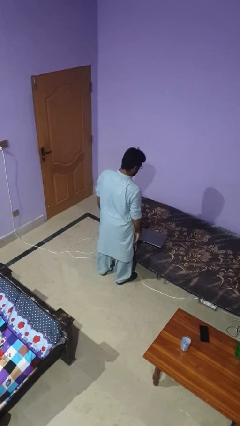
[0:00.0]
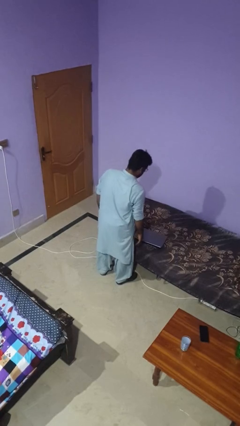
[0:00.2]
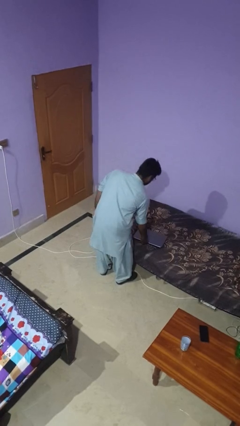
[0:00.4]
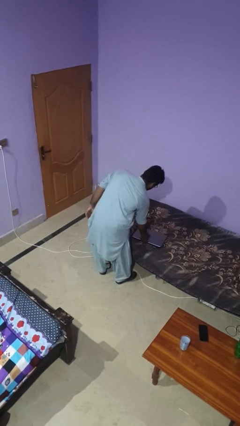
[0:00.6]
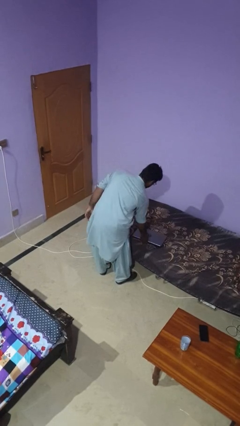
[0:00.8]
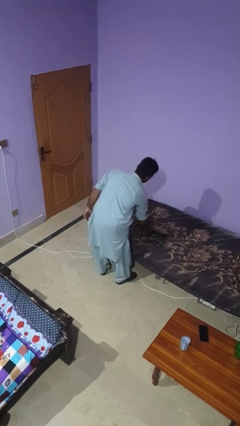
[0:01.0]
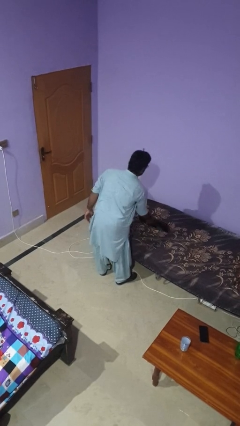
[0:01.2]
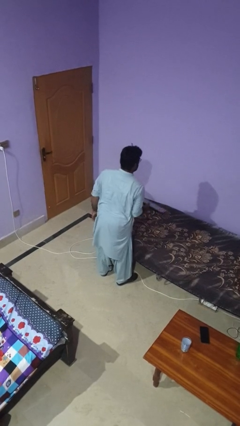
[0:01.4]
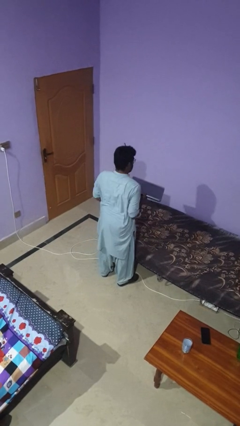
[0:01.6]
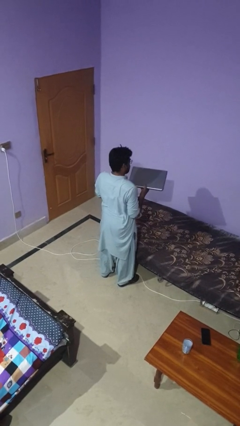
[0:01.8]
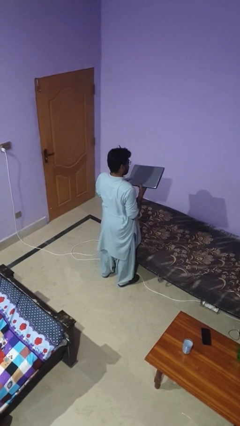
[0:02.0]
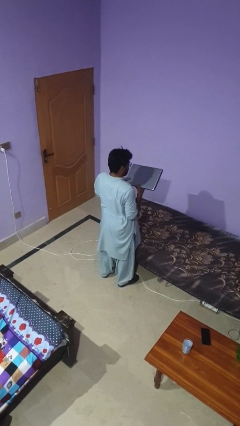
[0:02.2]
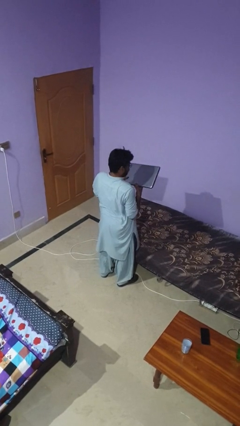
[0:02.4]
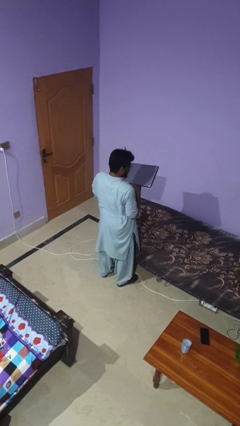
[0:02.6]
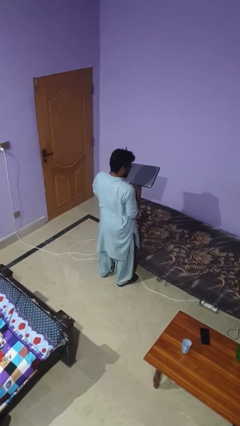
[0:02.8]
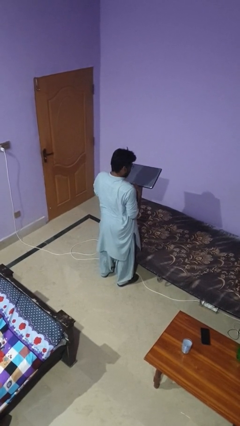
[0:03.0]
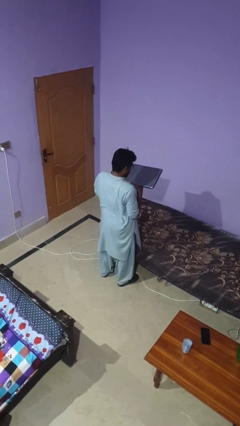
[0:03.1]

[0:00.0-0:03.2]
person picks up object from bed

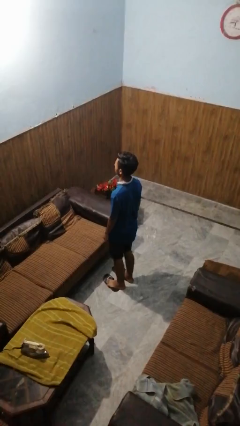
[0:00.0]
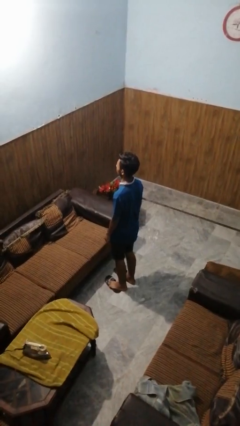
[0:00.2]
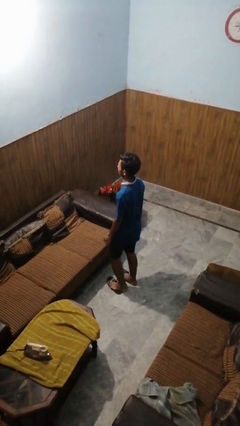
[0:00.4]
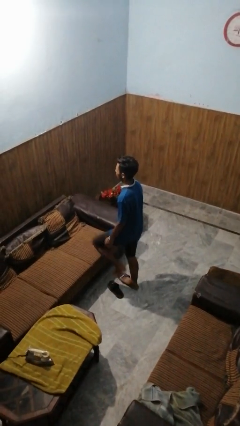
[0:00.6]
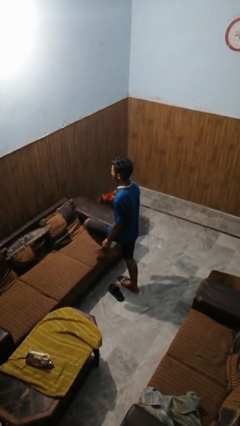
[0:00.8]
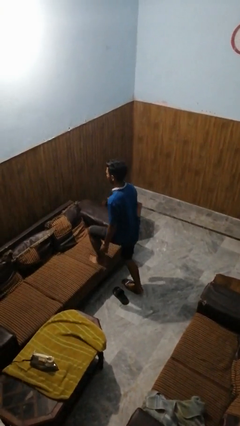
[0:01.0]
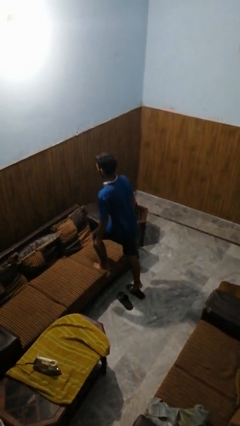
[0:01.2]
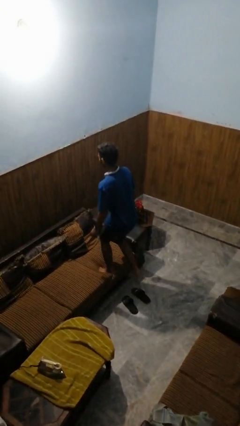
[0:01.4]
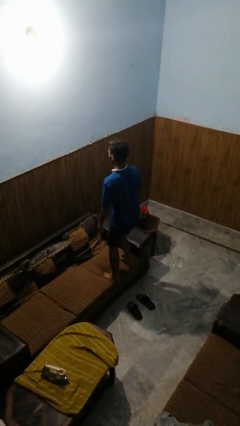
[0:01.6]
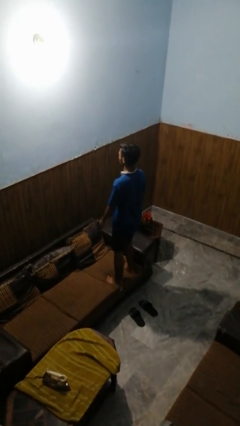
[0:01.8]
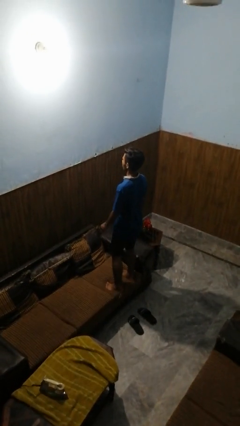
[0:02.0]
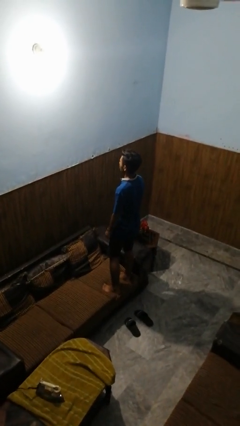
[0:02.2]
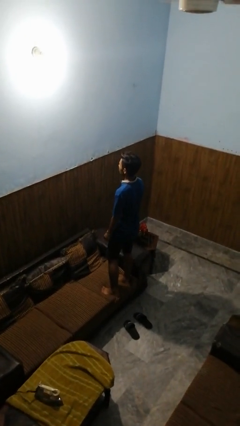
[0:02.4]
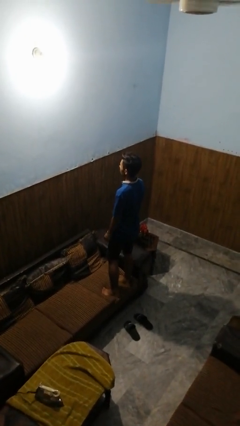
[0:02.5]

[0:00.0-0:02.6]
person climbs on couch

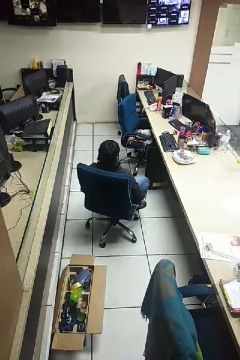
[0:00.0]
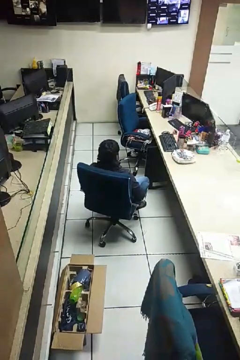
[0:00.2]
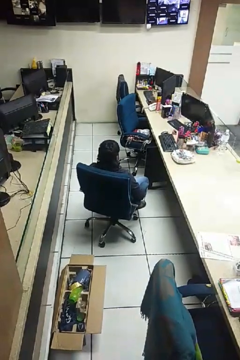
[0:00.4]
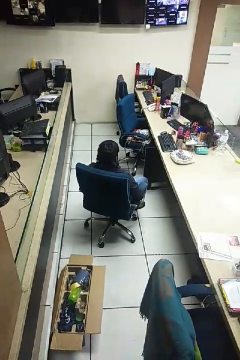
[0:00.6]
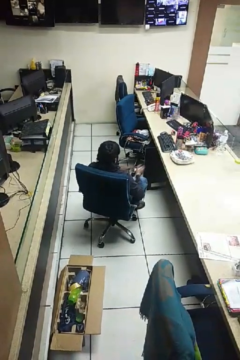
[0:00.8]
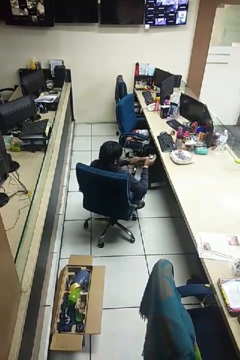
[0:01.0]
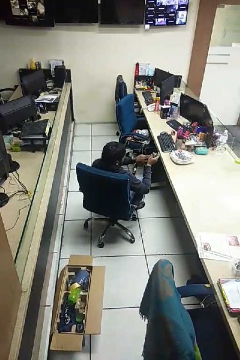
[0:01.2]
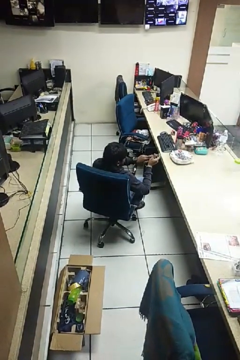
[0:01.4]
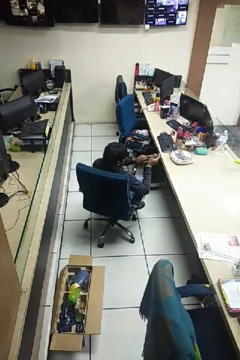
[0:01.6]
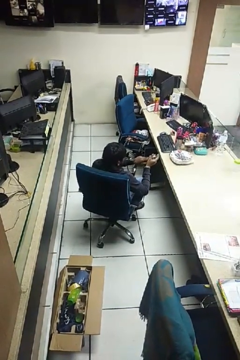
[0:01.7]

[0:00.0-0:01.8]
person clips fingernails

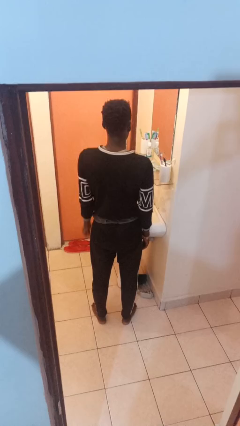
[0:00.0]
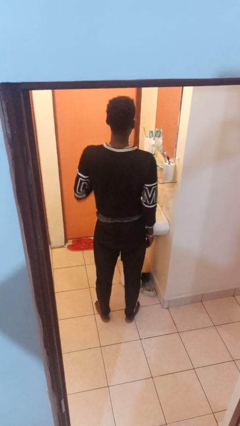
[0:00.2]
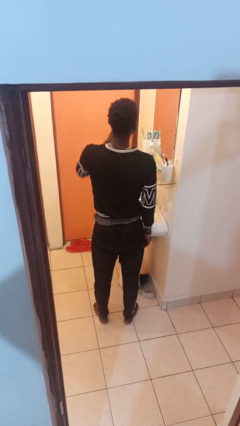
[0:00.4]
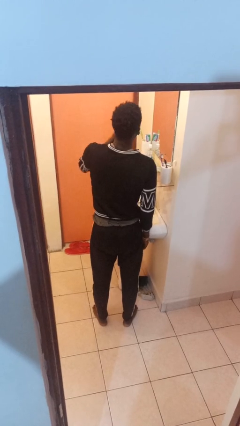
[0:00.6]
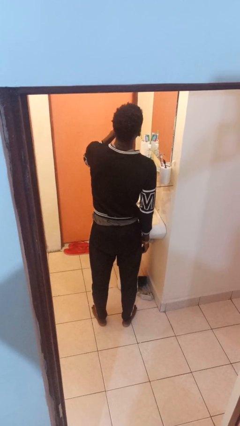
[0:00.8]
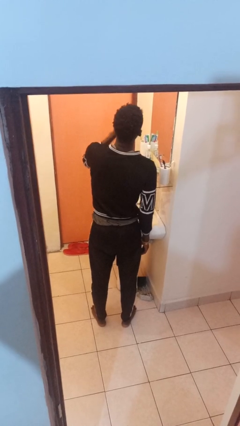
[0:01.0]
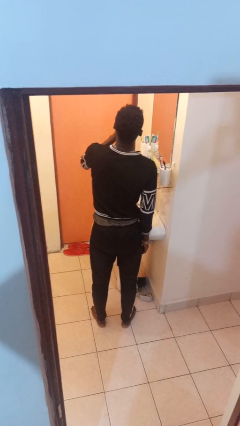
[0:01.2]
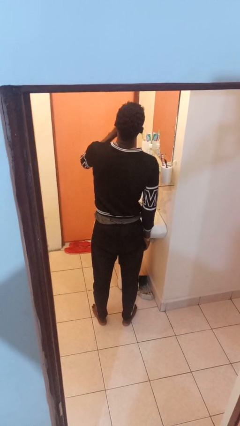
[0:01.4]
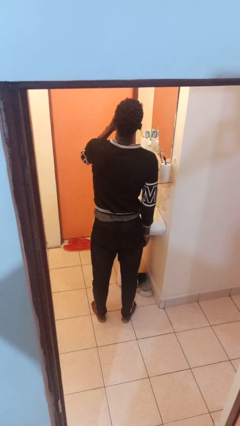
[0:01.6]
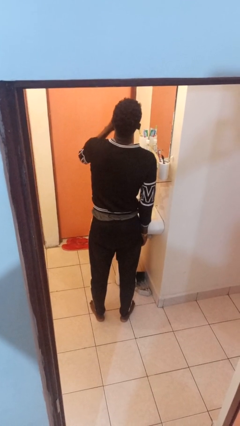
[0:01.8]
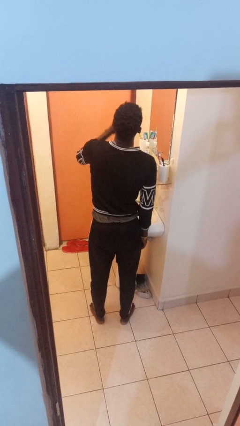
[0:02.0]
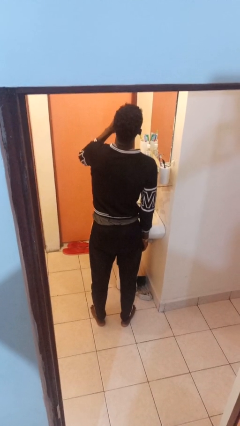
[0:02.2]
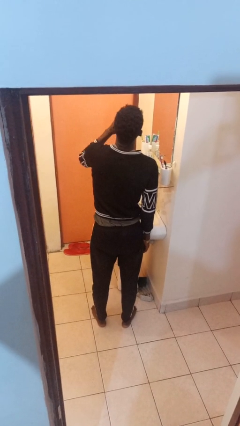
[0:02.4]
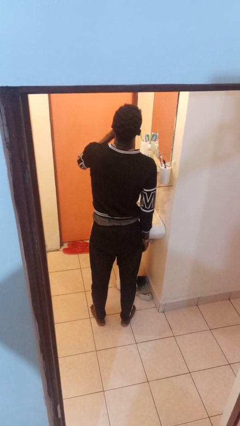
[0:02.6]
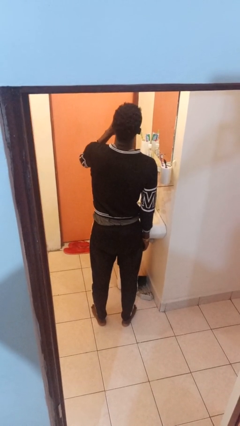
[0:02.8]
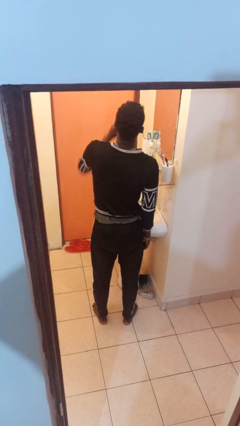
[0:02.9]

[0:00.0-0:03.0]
person brushes teeth

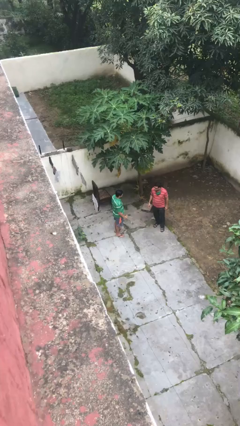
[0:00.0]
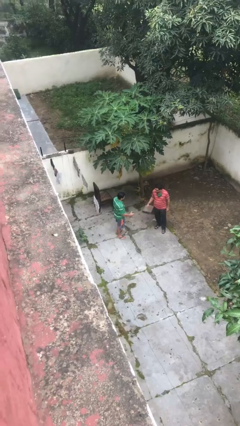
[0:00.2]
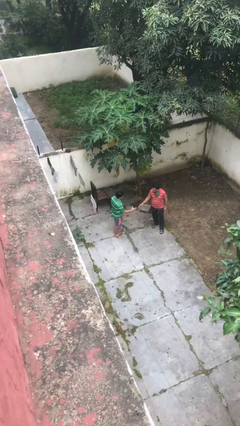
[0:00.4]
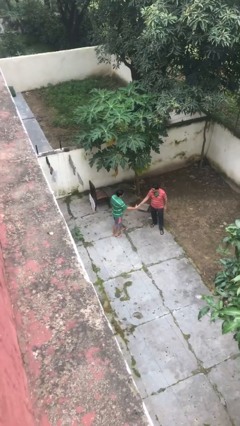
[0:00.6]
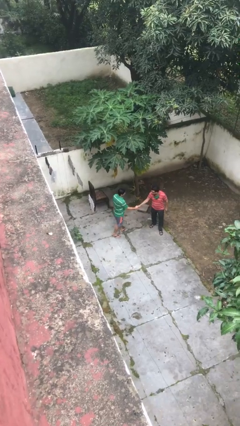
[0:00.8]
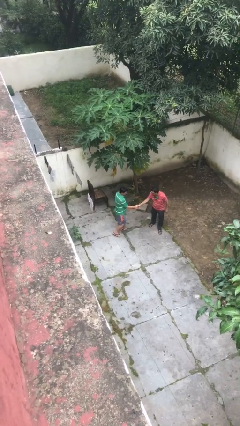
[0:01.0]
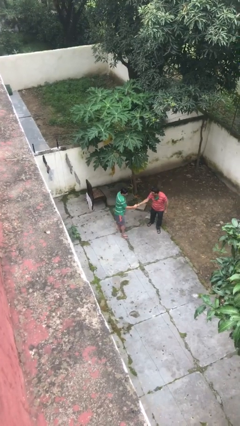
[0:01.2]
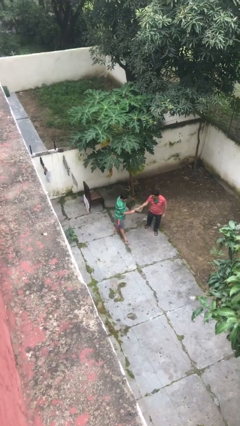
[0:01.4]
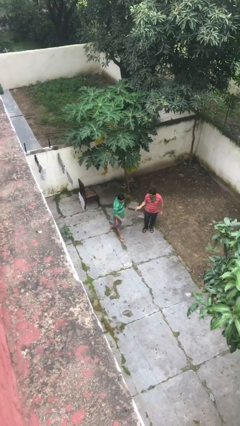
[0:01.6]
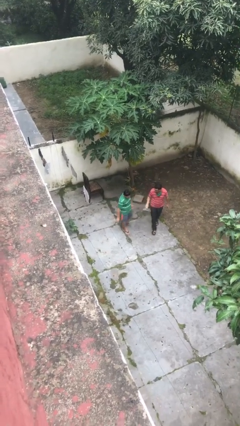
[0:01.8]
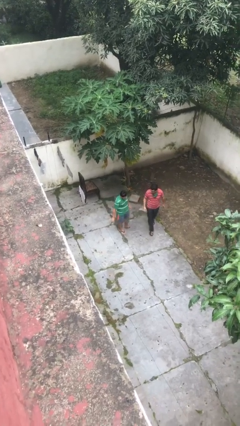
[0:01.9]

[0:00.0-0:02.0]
person shakes hand

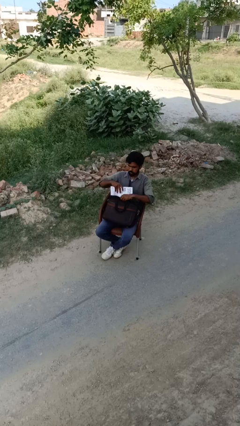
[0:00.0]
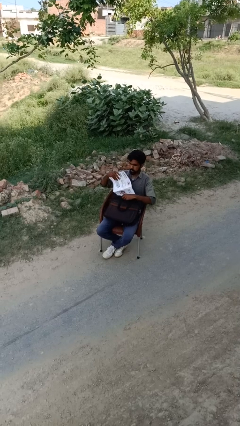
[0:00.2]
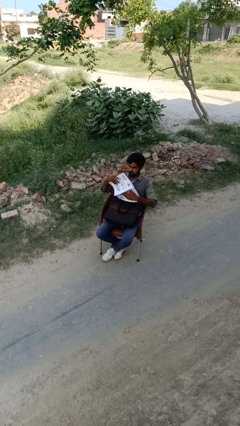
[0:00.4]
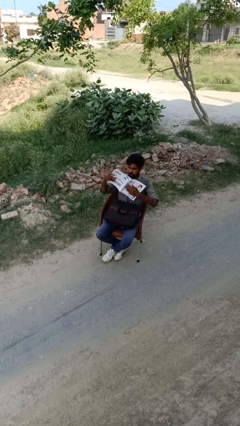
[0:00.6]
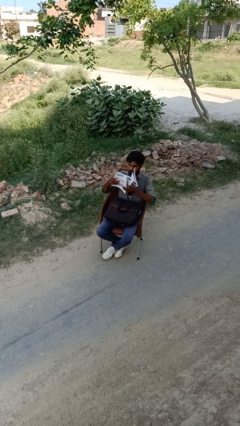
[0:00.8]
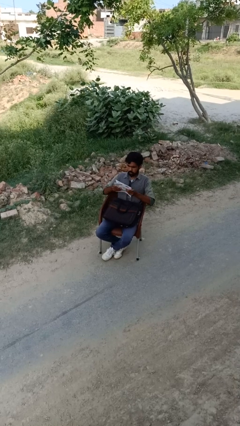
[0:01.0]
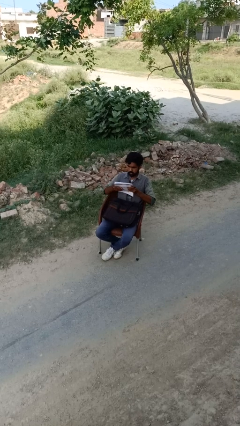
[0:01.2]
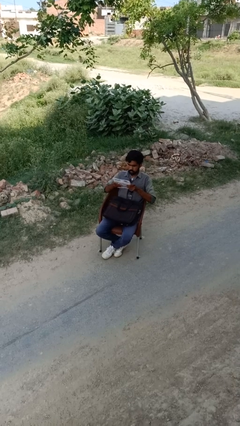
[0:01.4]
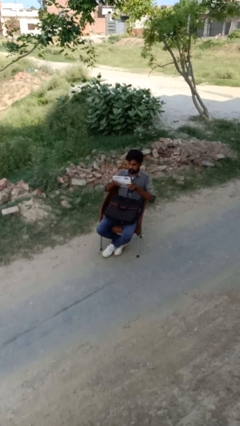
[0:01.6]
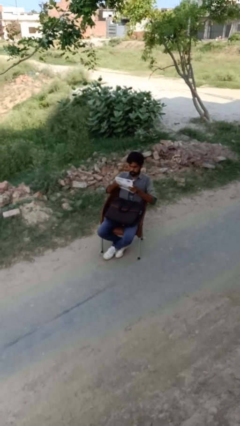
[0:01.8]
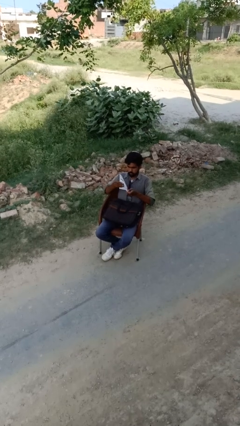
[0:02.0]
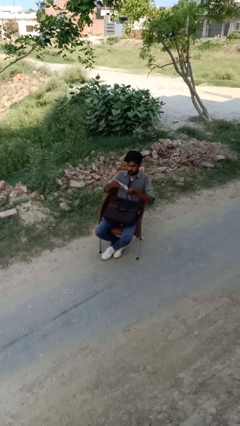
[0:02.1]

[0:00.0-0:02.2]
person takes object from backpack

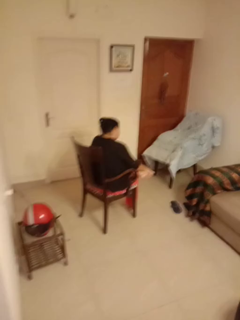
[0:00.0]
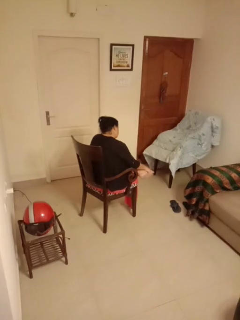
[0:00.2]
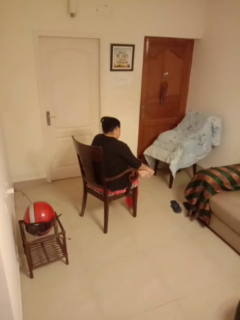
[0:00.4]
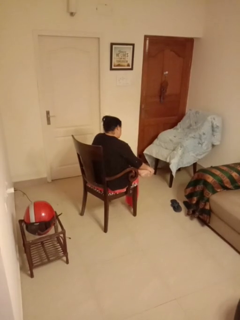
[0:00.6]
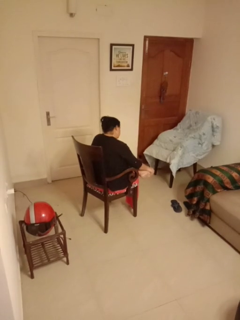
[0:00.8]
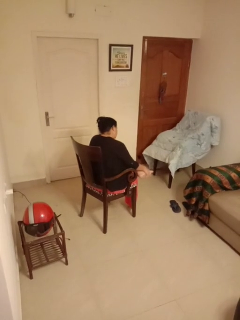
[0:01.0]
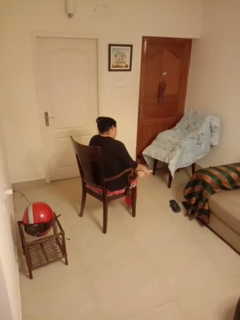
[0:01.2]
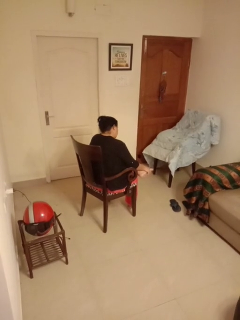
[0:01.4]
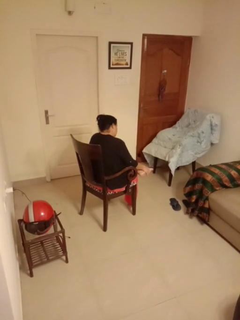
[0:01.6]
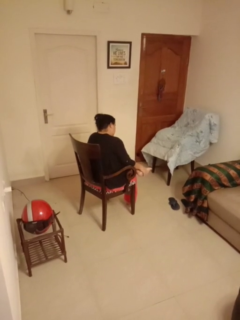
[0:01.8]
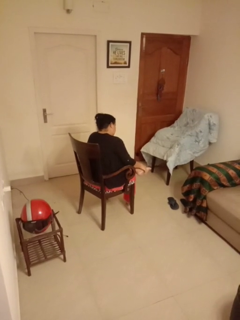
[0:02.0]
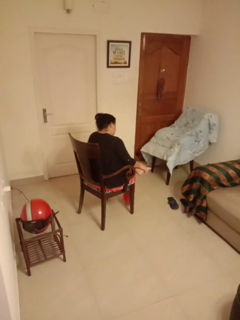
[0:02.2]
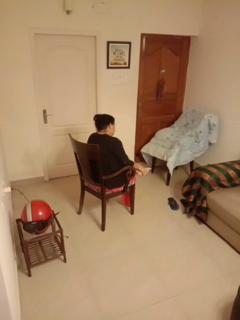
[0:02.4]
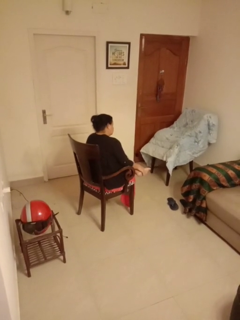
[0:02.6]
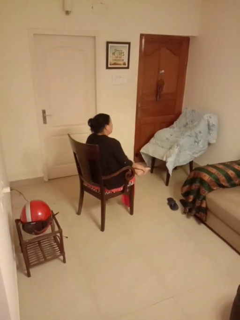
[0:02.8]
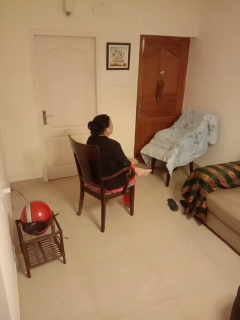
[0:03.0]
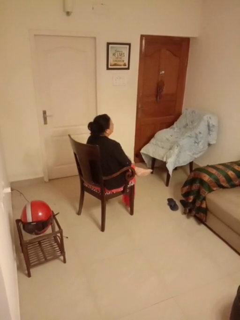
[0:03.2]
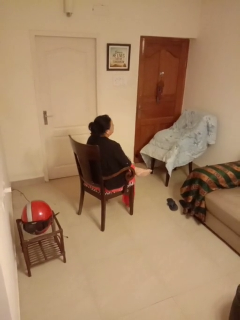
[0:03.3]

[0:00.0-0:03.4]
person rubs foot

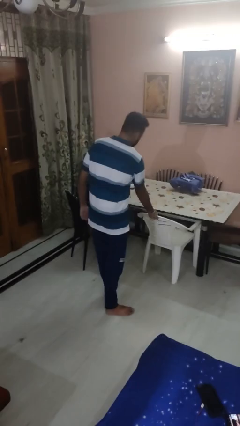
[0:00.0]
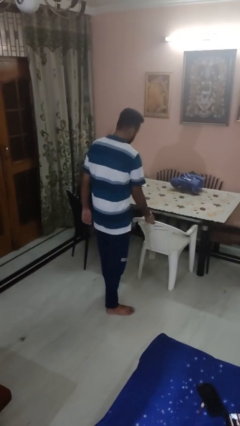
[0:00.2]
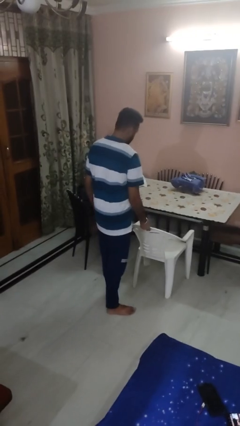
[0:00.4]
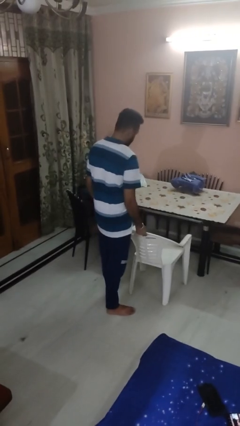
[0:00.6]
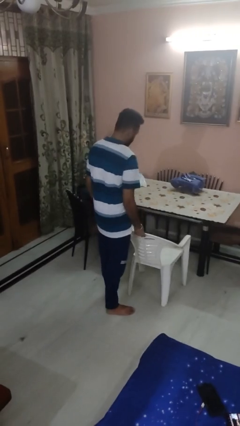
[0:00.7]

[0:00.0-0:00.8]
person pulls out chair
